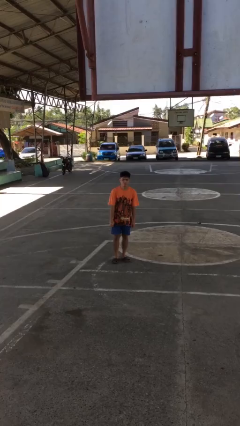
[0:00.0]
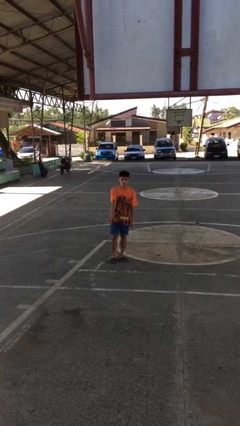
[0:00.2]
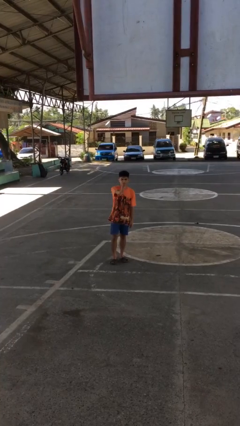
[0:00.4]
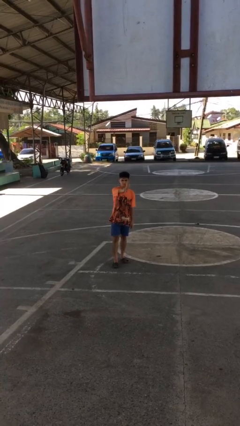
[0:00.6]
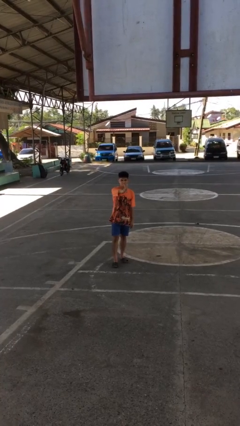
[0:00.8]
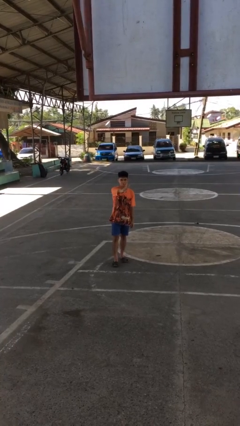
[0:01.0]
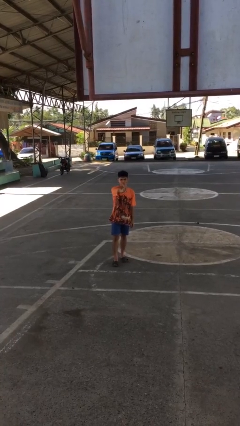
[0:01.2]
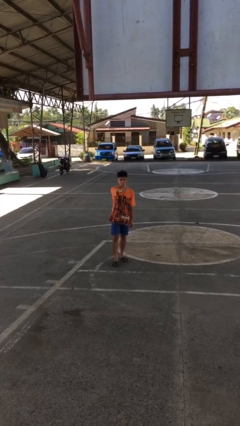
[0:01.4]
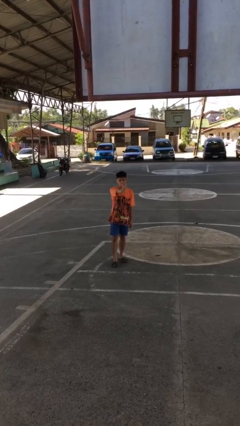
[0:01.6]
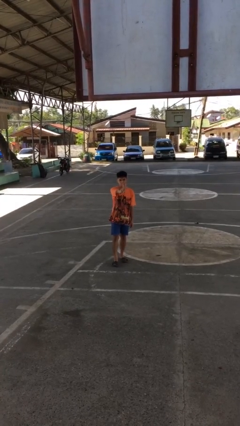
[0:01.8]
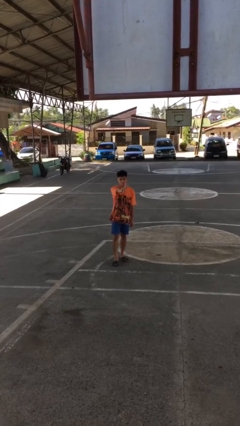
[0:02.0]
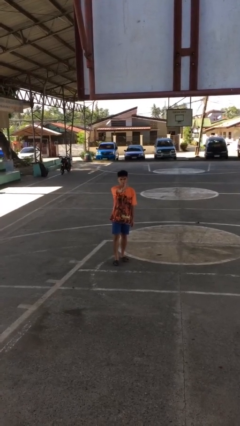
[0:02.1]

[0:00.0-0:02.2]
person gestures peace

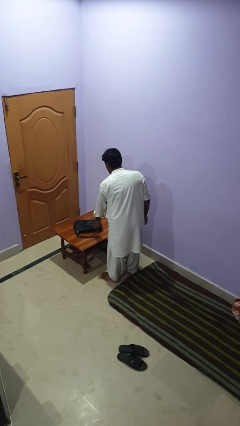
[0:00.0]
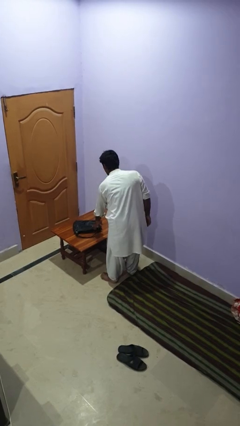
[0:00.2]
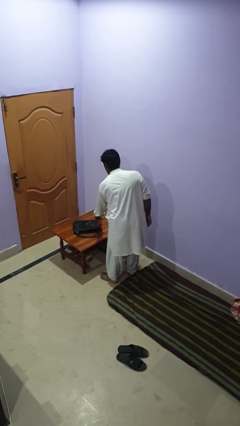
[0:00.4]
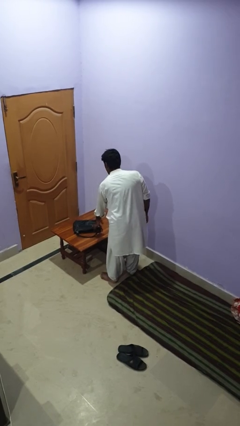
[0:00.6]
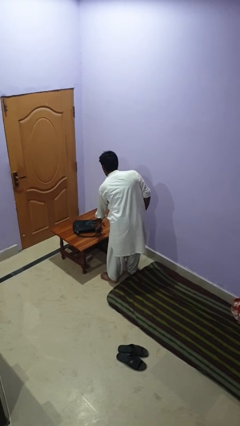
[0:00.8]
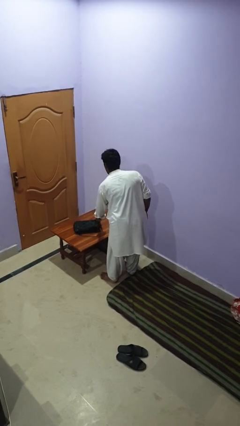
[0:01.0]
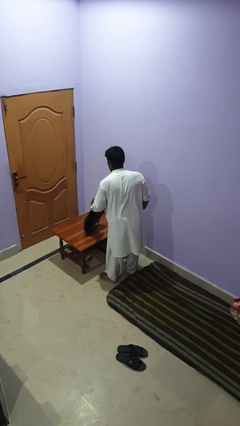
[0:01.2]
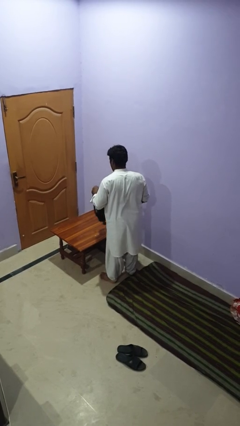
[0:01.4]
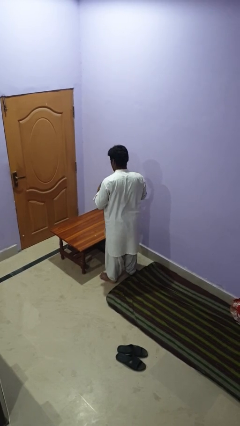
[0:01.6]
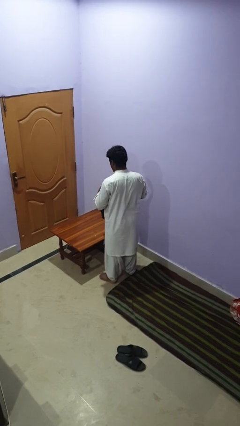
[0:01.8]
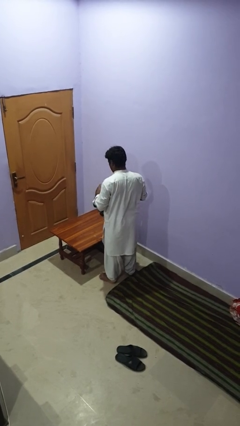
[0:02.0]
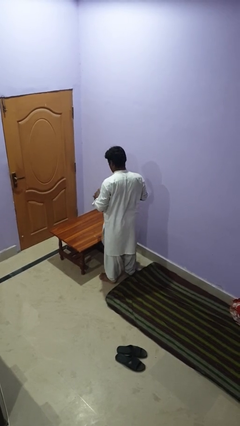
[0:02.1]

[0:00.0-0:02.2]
person picks up object from table

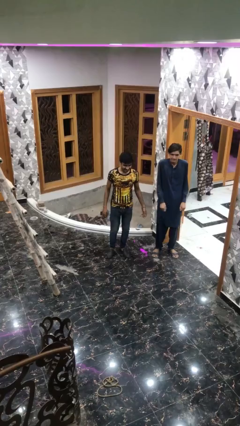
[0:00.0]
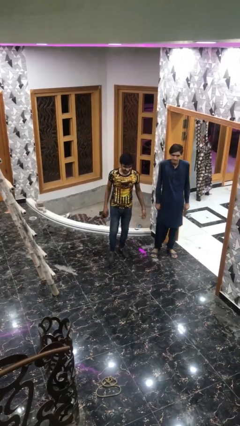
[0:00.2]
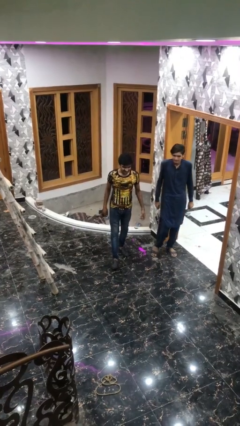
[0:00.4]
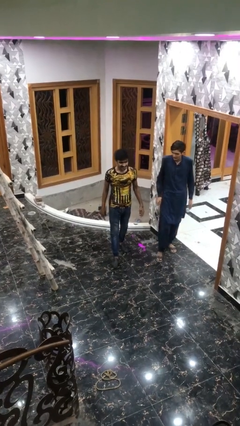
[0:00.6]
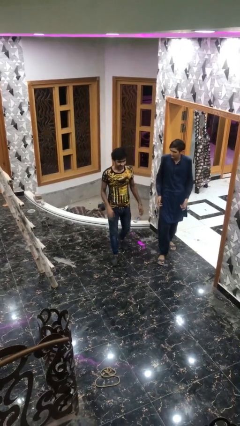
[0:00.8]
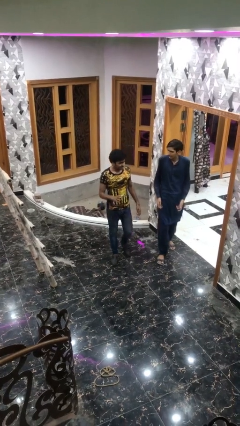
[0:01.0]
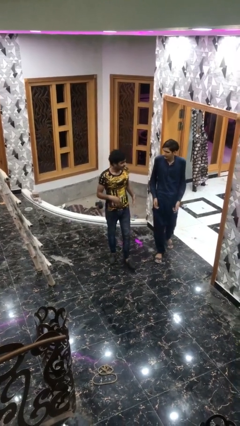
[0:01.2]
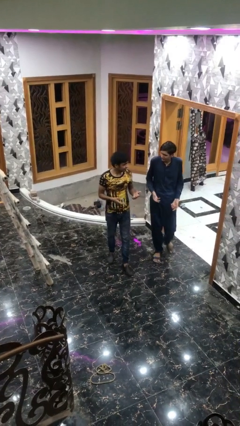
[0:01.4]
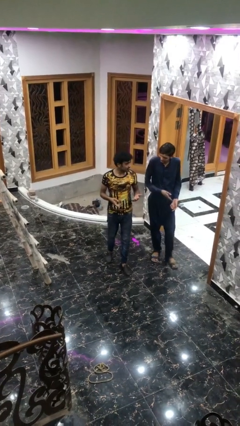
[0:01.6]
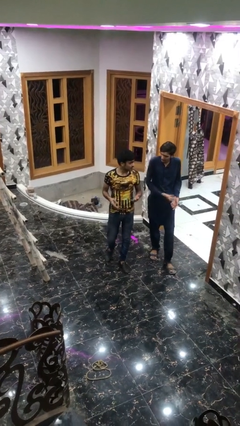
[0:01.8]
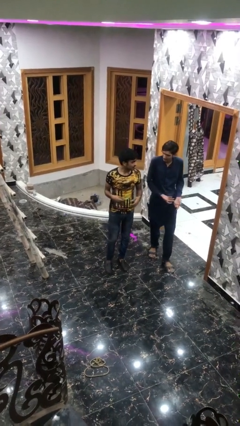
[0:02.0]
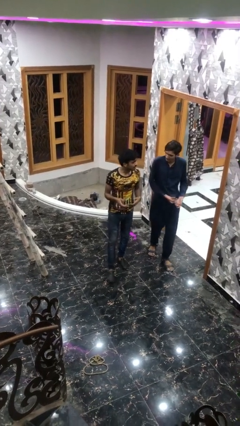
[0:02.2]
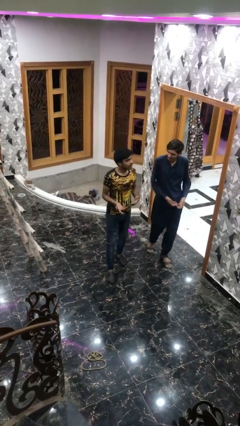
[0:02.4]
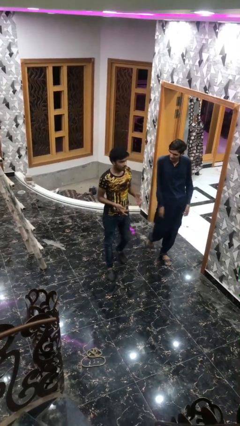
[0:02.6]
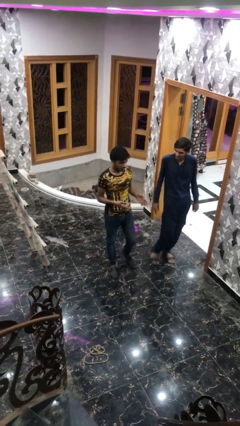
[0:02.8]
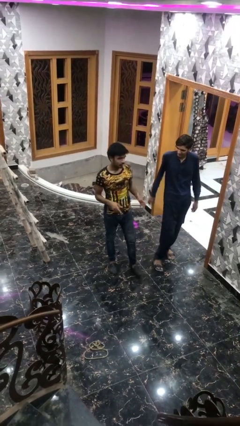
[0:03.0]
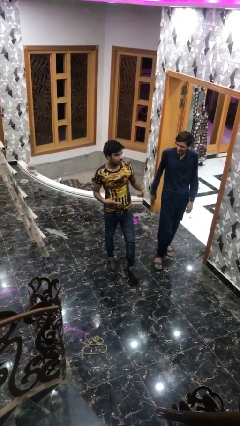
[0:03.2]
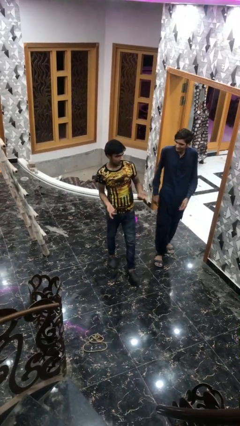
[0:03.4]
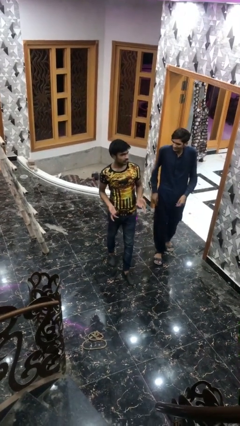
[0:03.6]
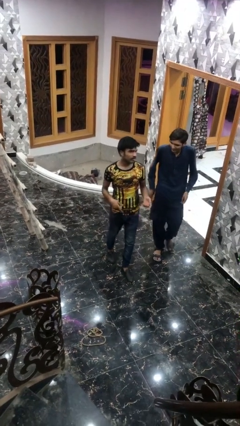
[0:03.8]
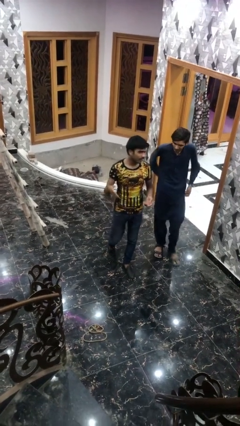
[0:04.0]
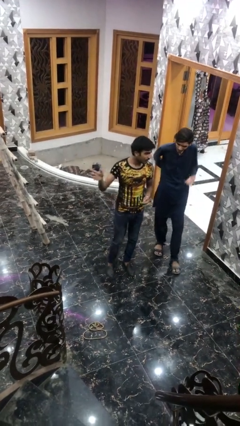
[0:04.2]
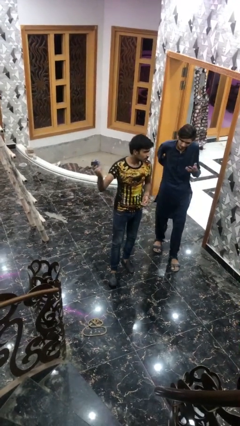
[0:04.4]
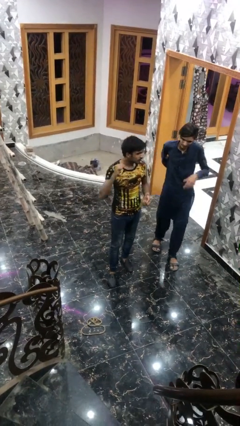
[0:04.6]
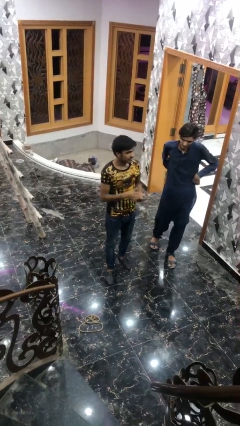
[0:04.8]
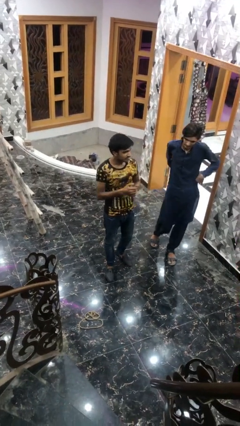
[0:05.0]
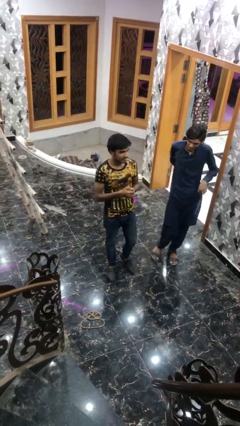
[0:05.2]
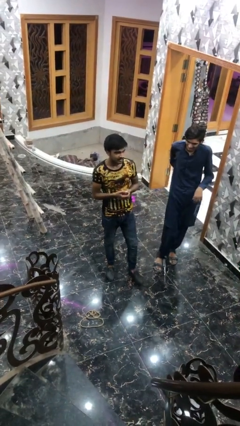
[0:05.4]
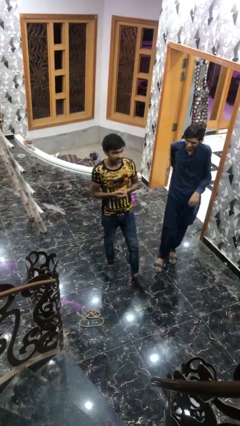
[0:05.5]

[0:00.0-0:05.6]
person talks to person

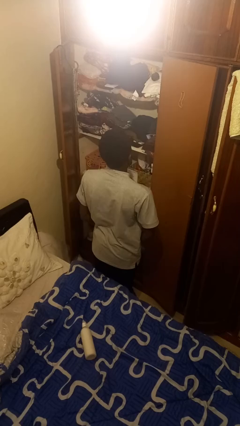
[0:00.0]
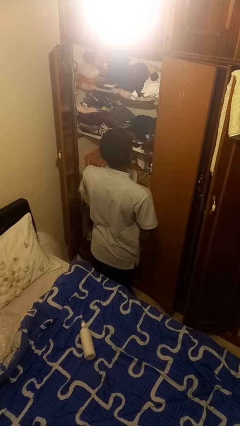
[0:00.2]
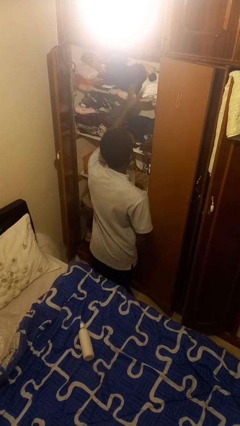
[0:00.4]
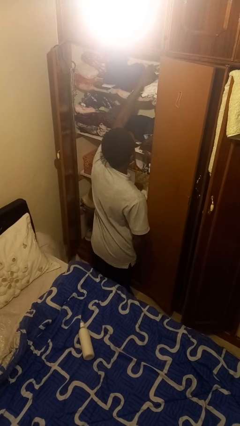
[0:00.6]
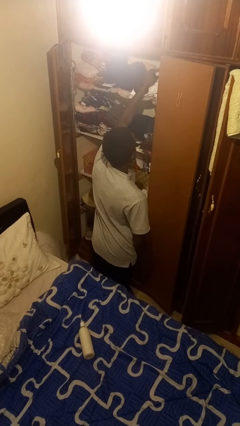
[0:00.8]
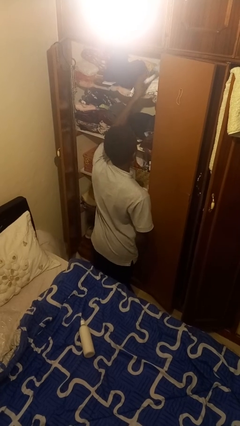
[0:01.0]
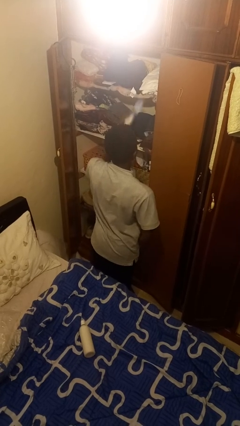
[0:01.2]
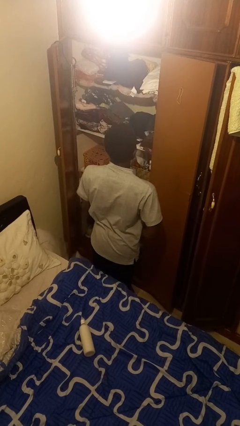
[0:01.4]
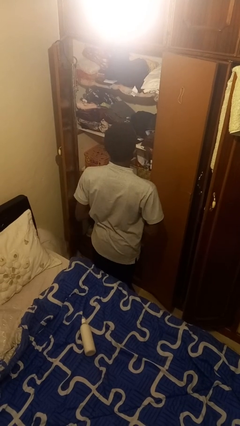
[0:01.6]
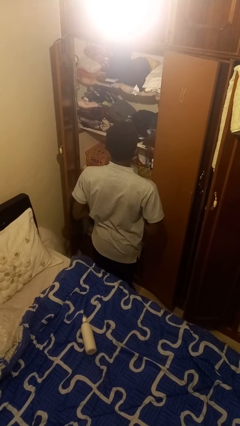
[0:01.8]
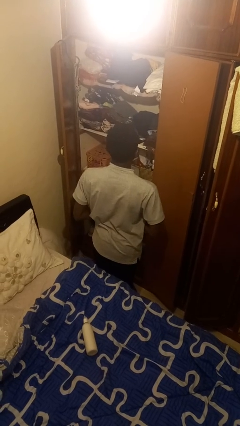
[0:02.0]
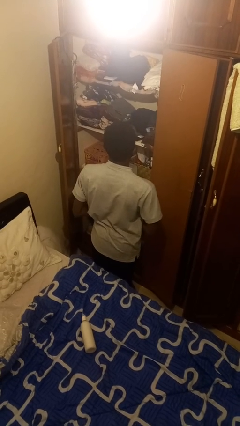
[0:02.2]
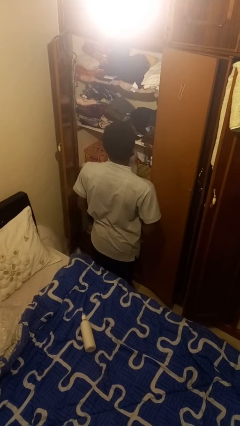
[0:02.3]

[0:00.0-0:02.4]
person picks up object from shelf

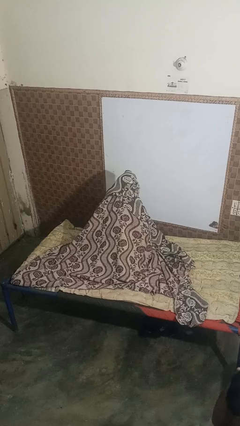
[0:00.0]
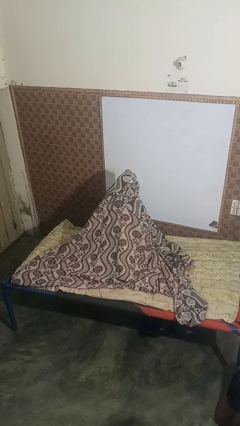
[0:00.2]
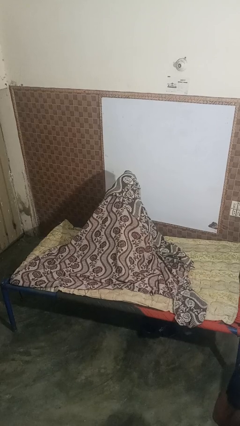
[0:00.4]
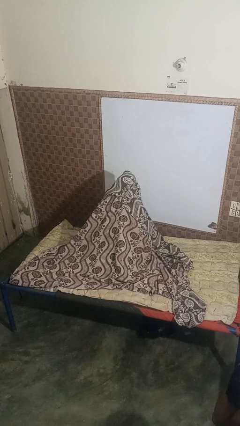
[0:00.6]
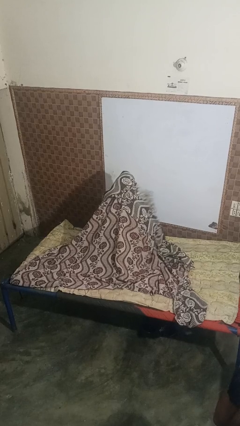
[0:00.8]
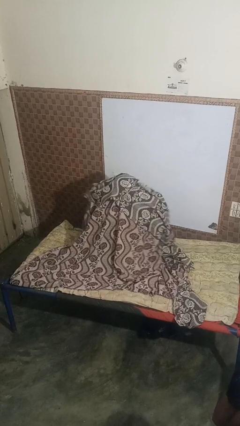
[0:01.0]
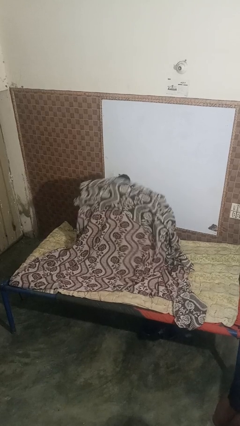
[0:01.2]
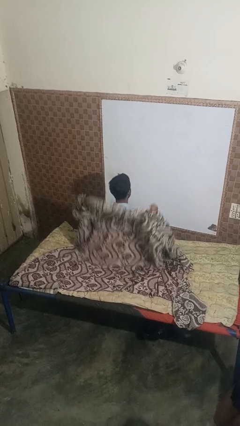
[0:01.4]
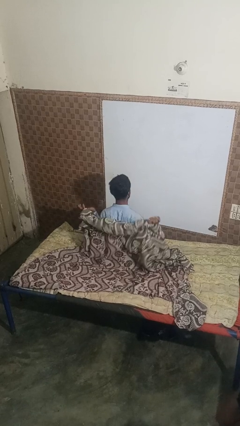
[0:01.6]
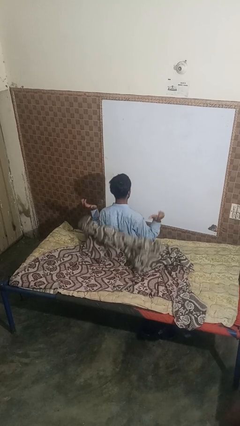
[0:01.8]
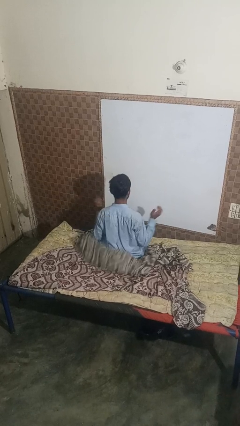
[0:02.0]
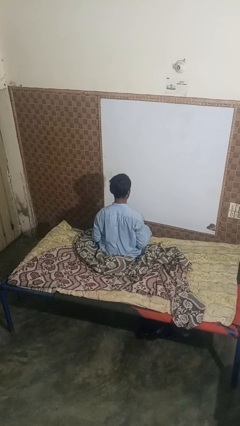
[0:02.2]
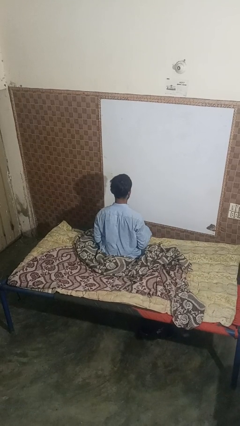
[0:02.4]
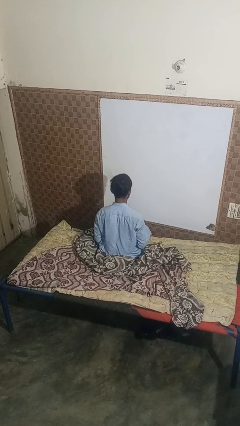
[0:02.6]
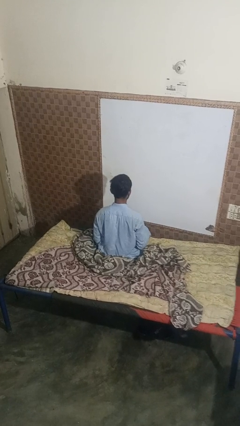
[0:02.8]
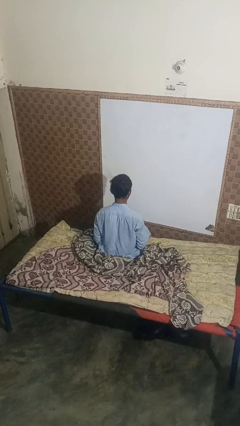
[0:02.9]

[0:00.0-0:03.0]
person uncovers with blanket

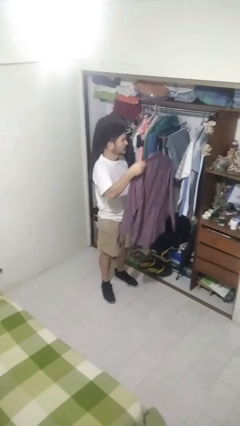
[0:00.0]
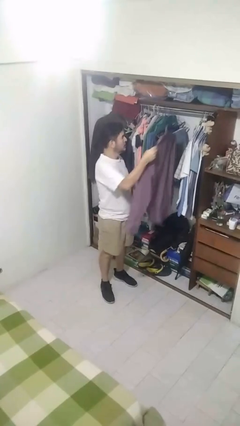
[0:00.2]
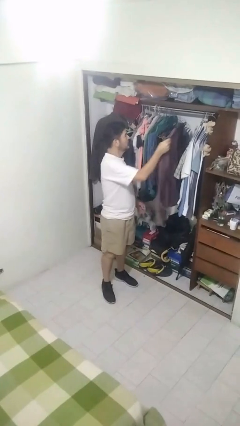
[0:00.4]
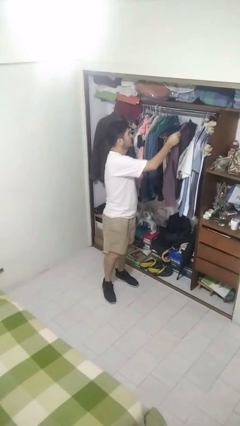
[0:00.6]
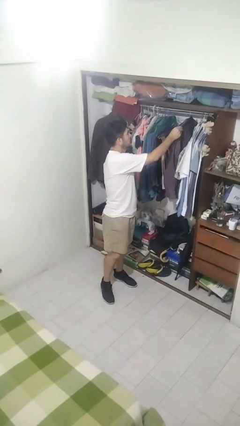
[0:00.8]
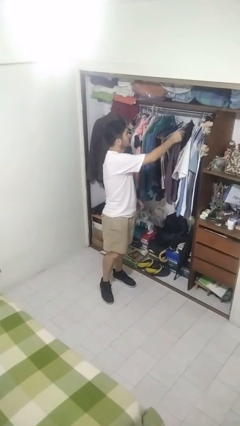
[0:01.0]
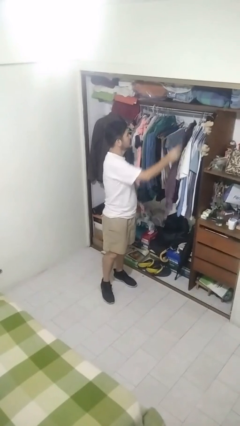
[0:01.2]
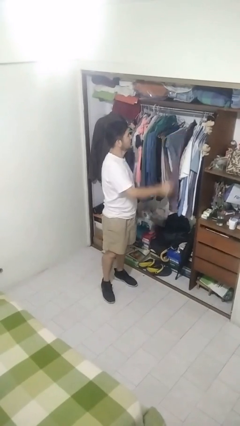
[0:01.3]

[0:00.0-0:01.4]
person puts clothes into closet
